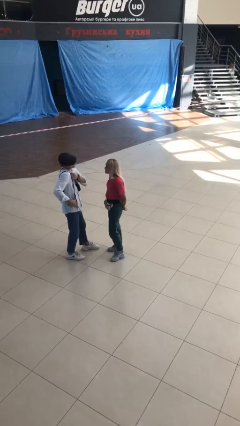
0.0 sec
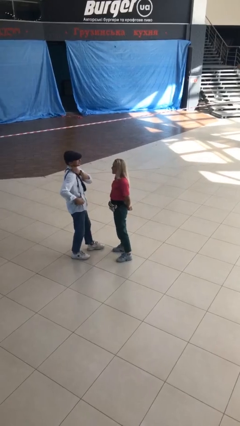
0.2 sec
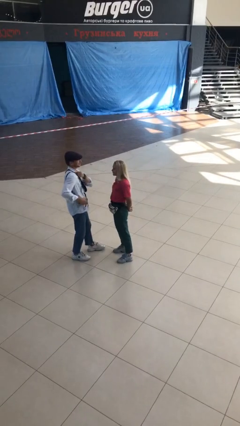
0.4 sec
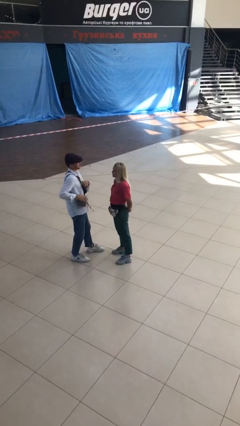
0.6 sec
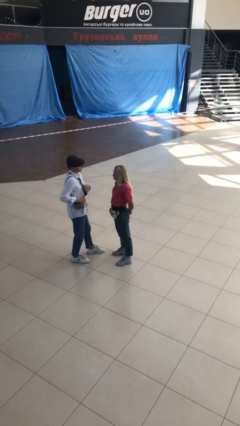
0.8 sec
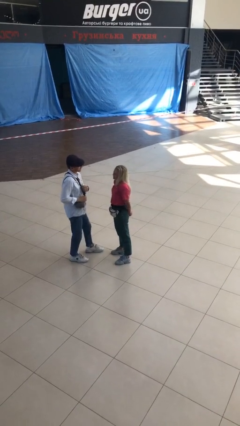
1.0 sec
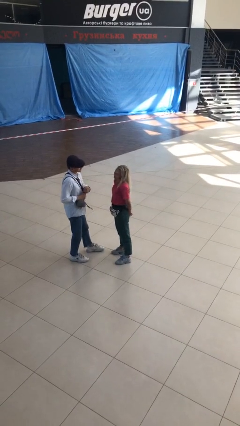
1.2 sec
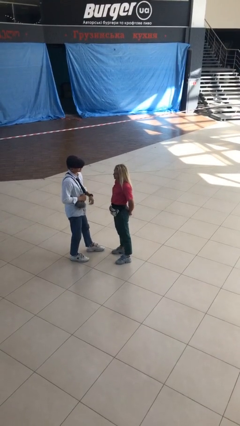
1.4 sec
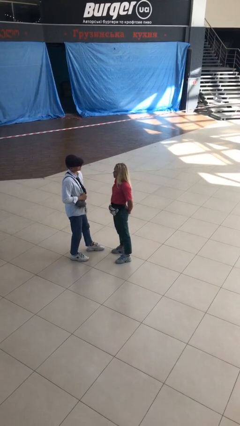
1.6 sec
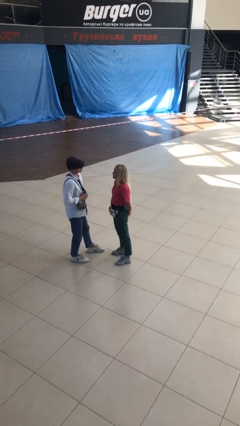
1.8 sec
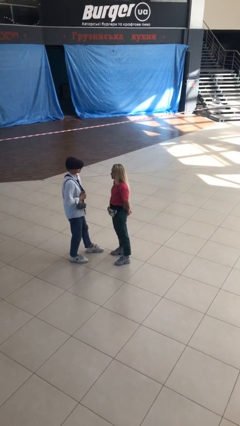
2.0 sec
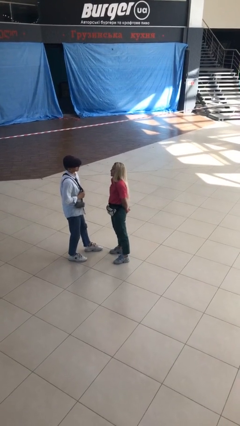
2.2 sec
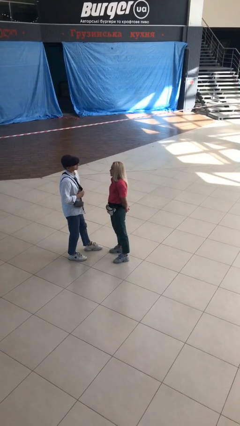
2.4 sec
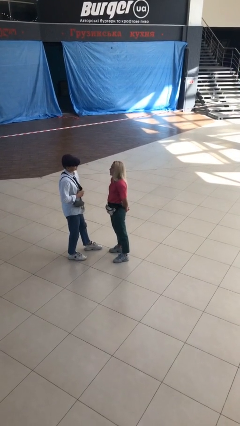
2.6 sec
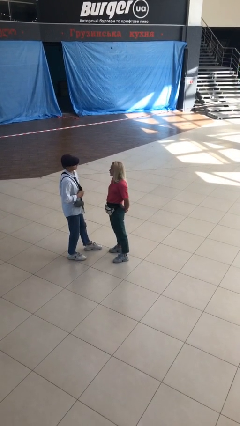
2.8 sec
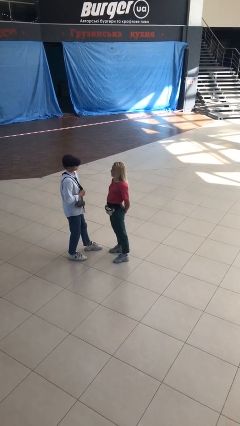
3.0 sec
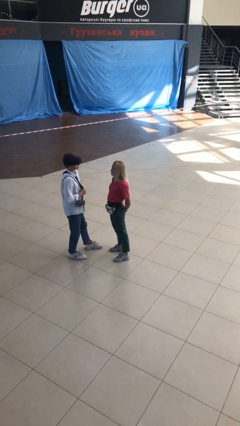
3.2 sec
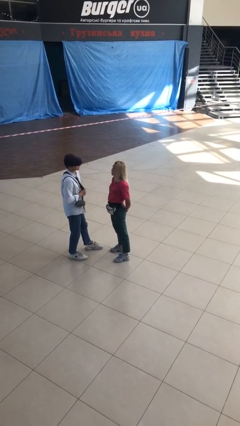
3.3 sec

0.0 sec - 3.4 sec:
person talks to person

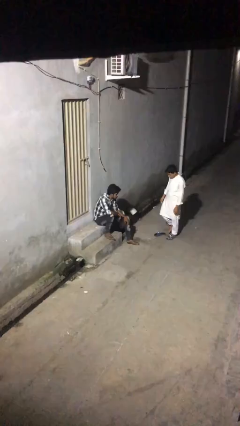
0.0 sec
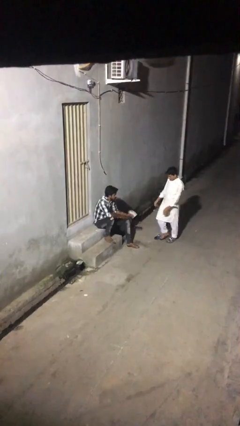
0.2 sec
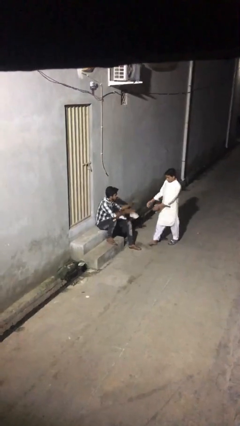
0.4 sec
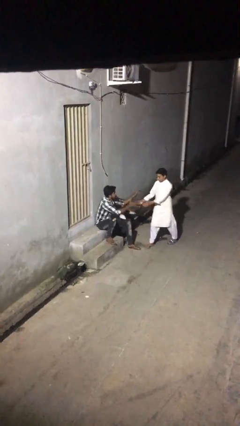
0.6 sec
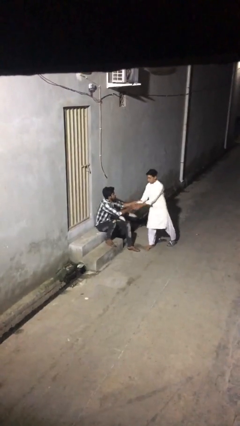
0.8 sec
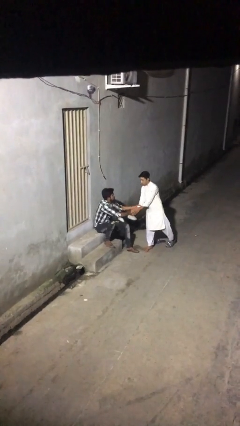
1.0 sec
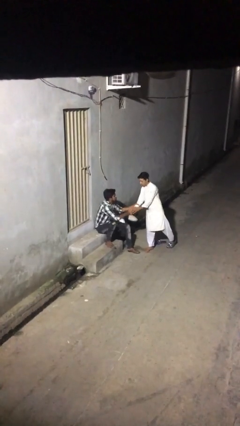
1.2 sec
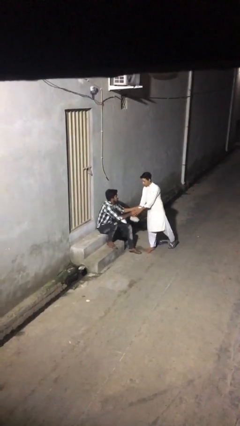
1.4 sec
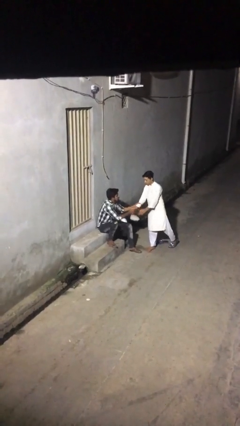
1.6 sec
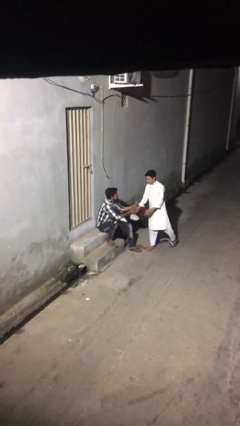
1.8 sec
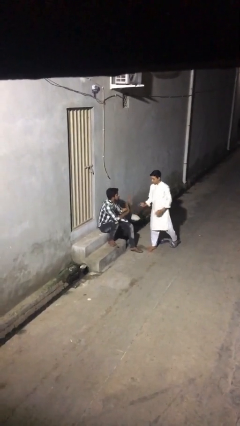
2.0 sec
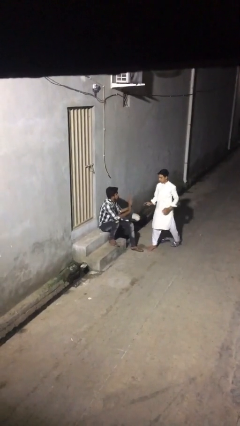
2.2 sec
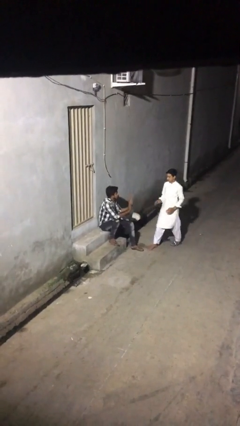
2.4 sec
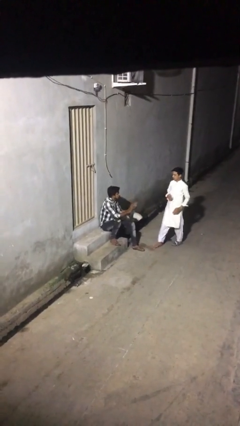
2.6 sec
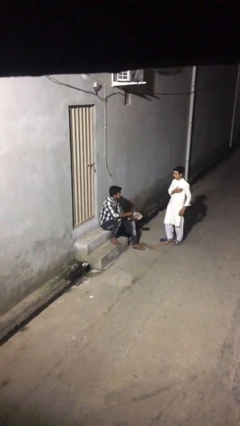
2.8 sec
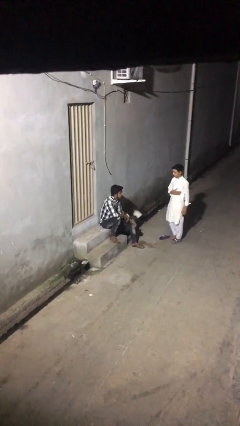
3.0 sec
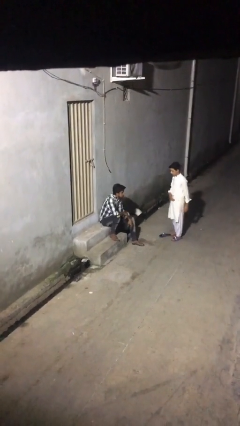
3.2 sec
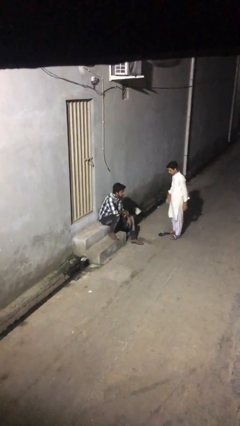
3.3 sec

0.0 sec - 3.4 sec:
person shakes hand

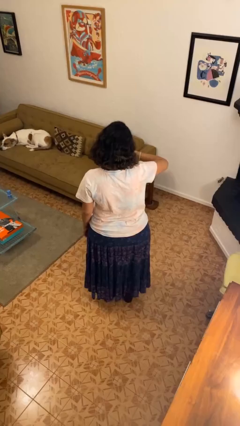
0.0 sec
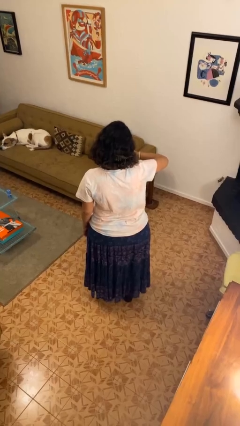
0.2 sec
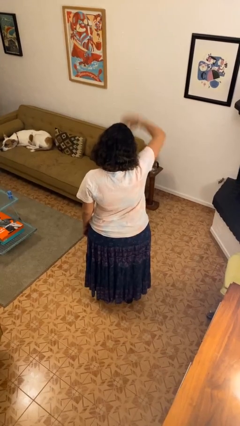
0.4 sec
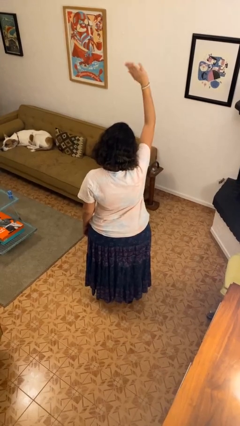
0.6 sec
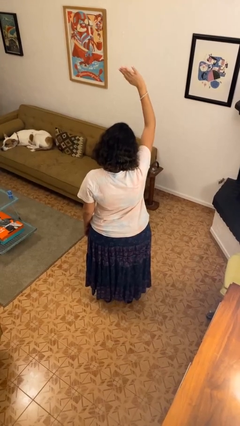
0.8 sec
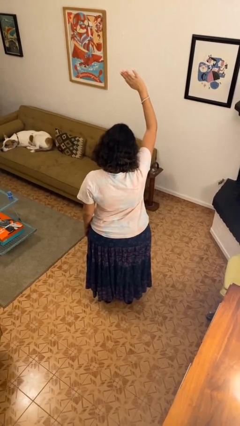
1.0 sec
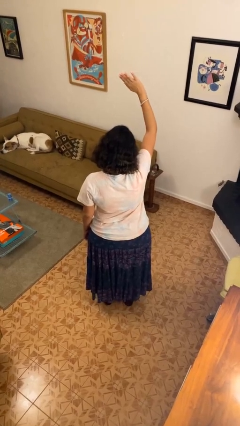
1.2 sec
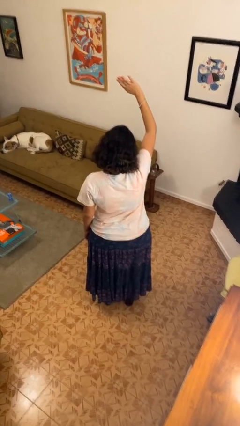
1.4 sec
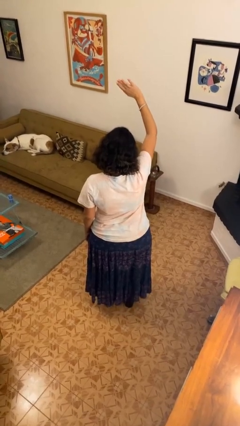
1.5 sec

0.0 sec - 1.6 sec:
person gestures swipe up

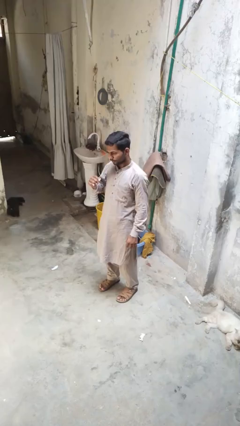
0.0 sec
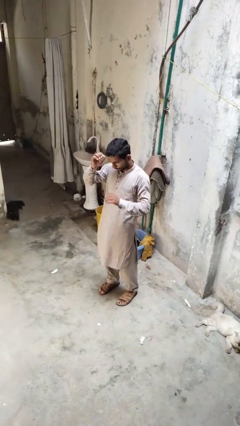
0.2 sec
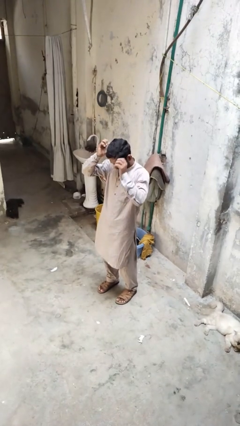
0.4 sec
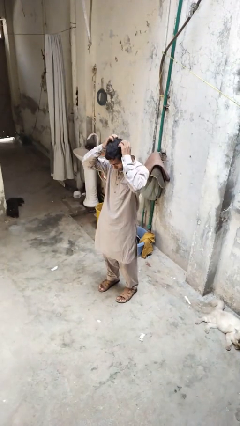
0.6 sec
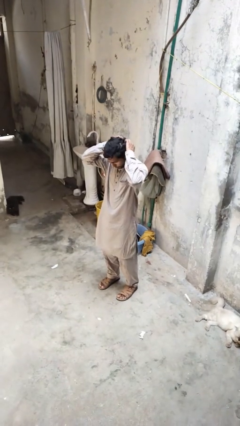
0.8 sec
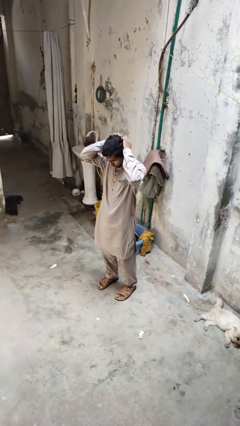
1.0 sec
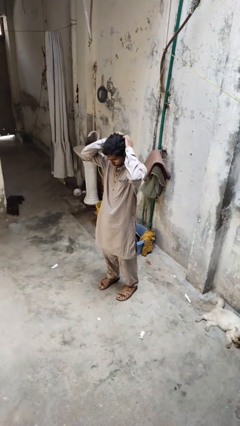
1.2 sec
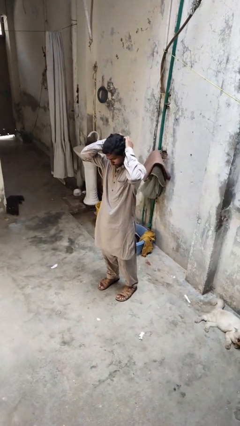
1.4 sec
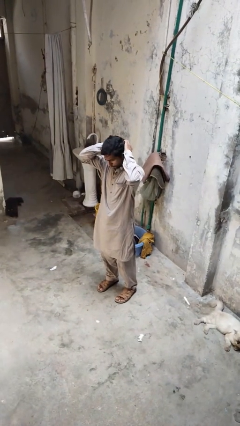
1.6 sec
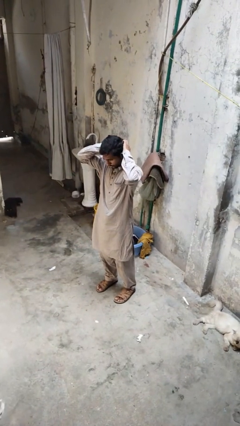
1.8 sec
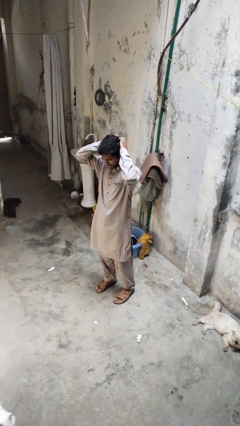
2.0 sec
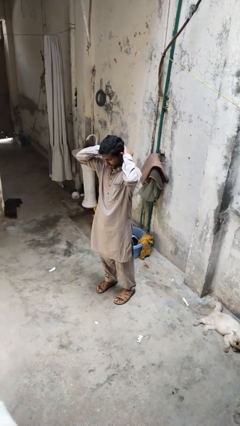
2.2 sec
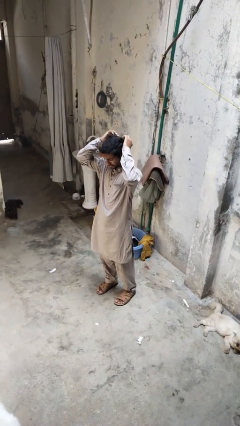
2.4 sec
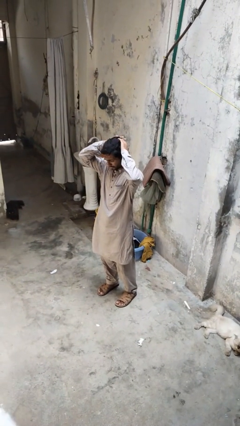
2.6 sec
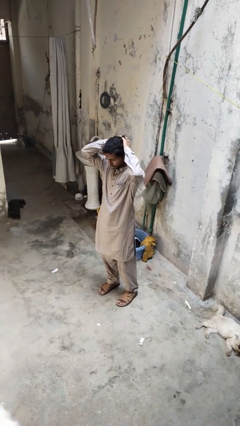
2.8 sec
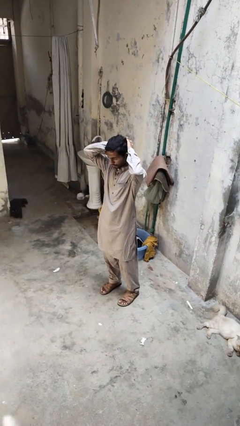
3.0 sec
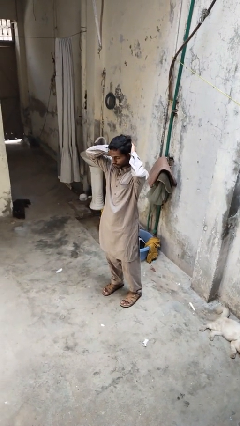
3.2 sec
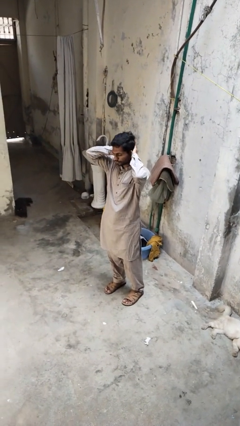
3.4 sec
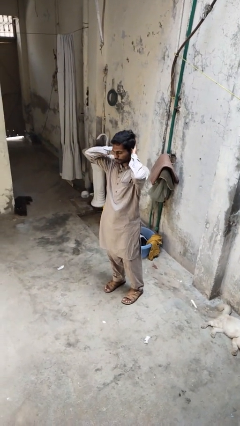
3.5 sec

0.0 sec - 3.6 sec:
person scratches face

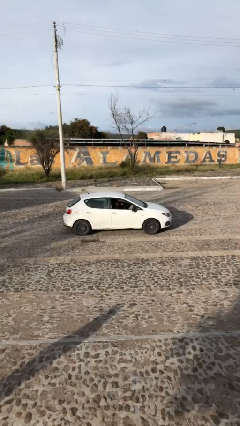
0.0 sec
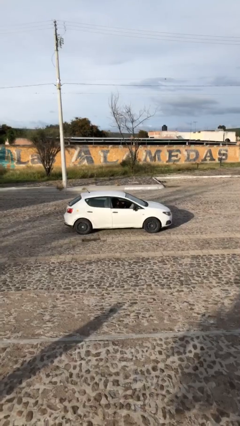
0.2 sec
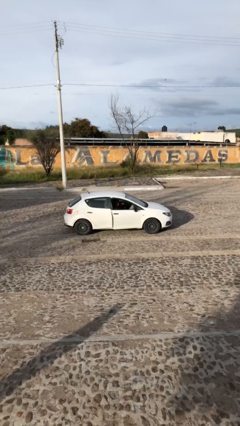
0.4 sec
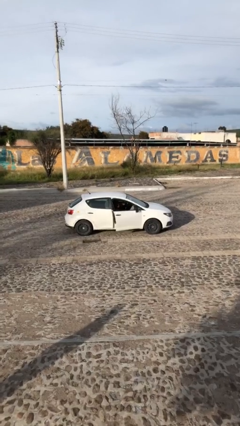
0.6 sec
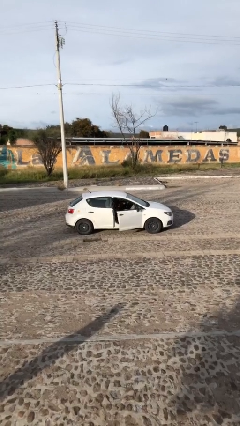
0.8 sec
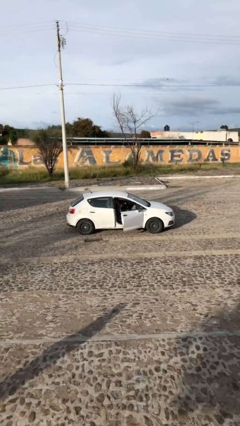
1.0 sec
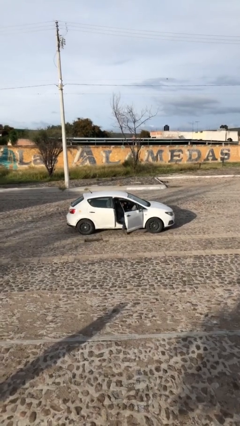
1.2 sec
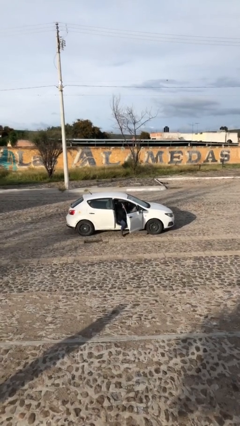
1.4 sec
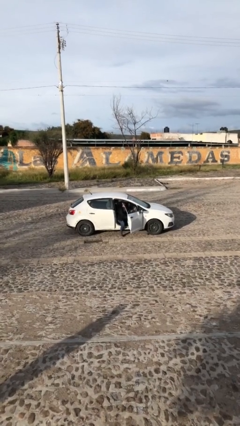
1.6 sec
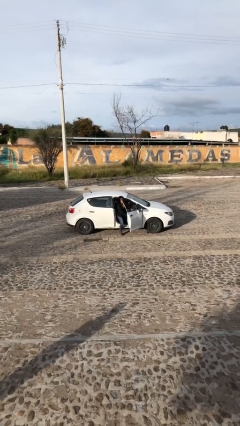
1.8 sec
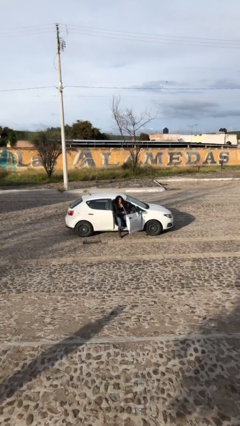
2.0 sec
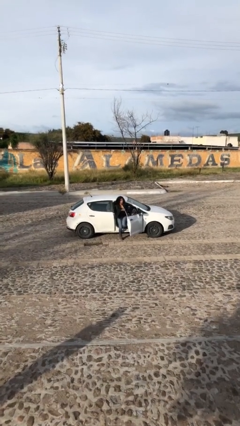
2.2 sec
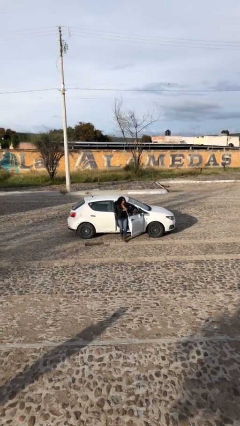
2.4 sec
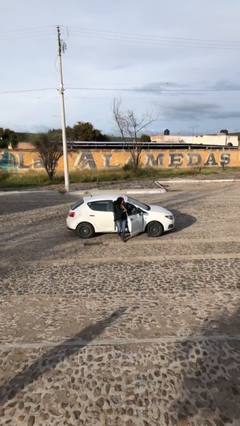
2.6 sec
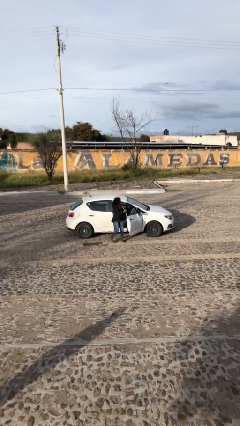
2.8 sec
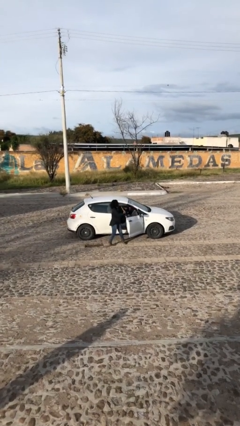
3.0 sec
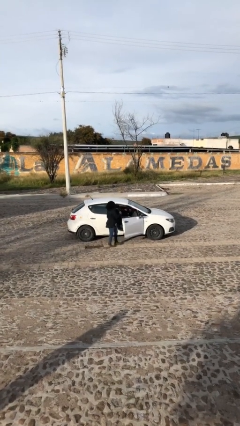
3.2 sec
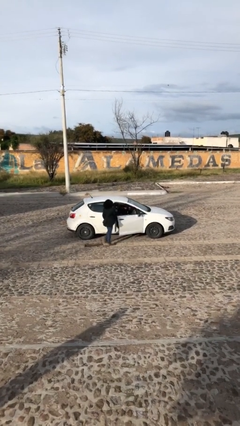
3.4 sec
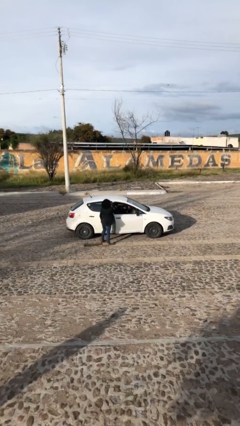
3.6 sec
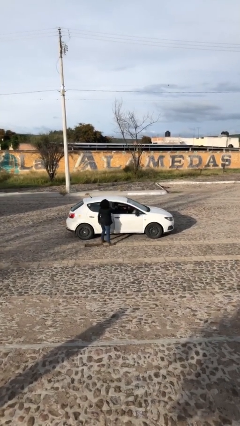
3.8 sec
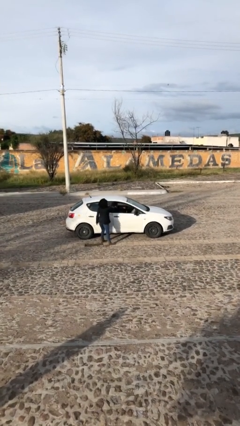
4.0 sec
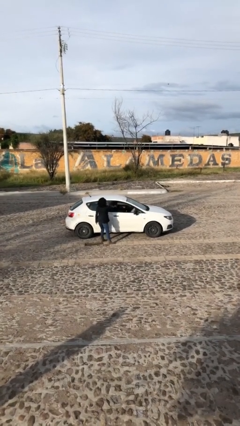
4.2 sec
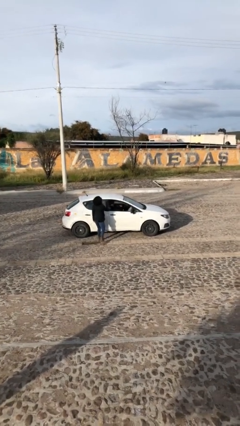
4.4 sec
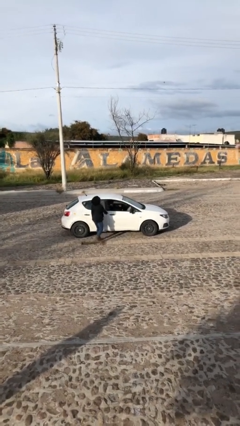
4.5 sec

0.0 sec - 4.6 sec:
car drops off person

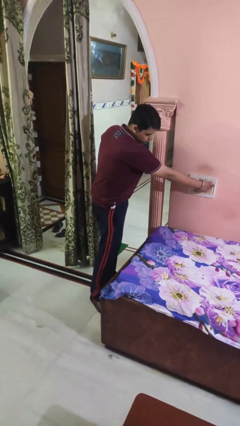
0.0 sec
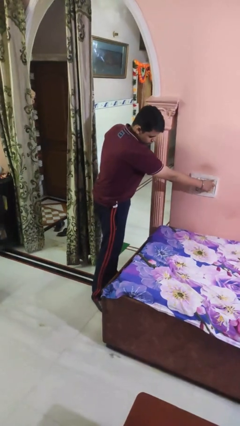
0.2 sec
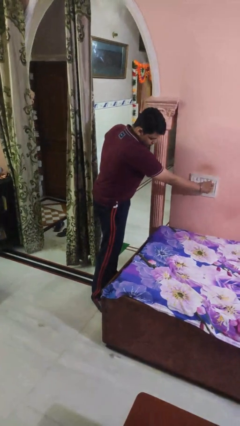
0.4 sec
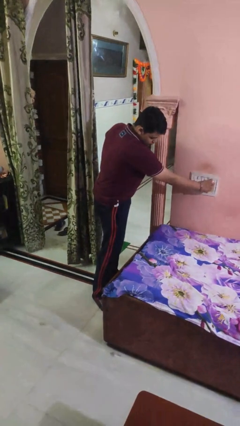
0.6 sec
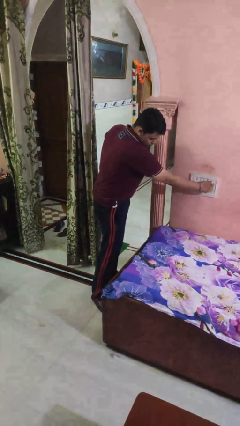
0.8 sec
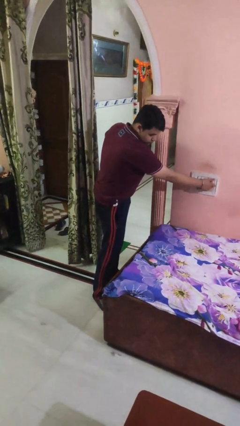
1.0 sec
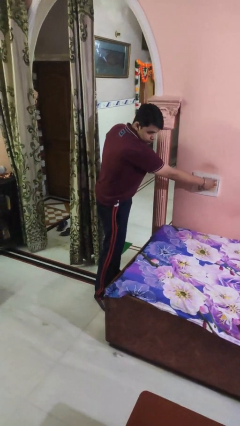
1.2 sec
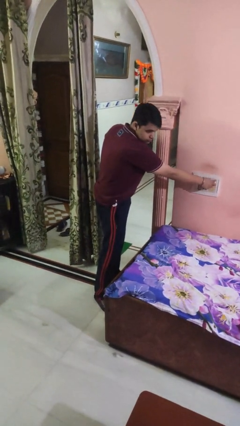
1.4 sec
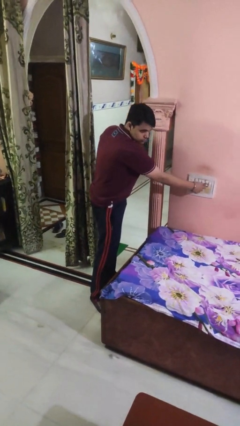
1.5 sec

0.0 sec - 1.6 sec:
person adjusts thermostat
